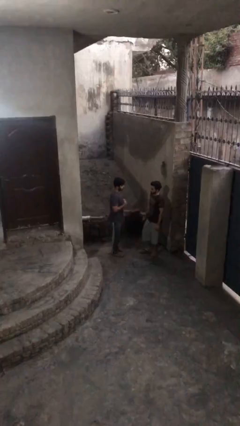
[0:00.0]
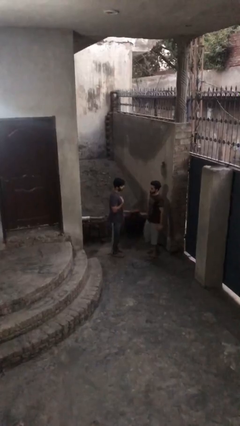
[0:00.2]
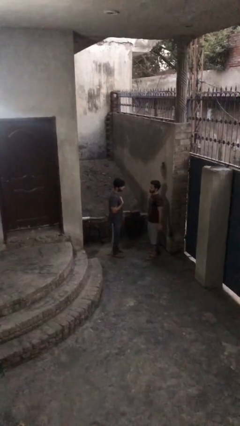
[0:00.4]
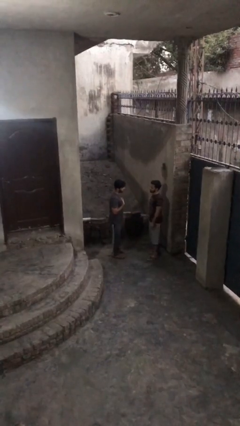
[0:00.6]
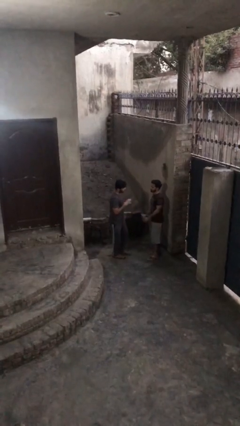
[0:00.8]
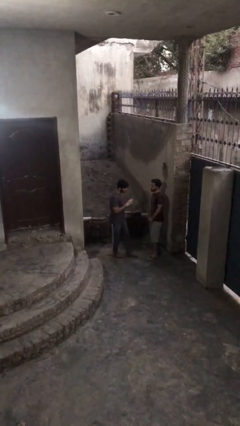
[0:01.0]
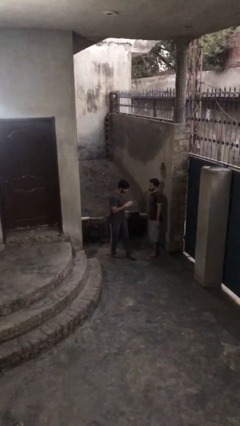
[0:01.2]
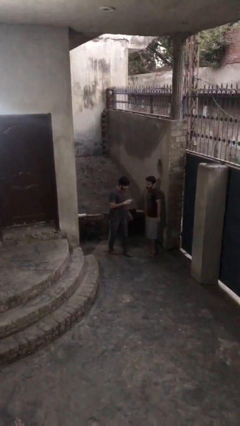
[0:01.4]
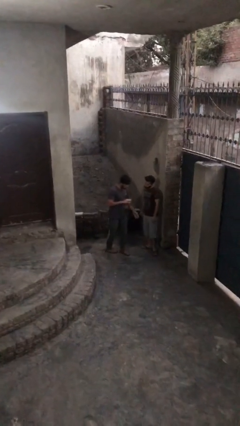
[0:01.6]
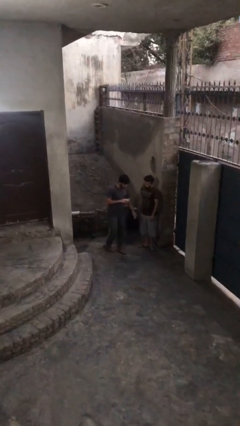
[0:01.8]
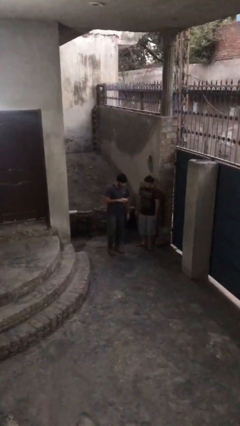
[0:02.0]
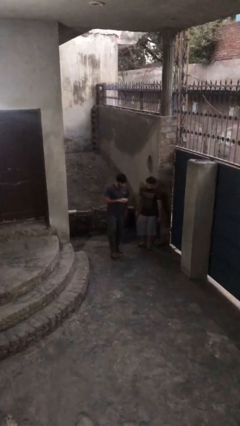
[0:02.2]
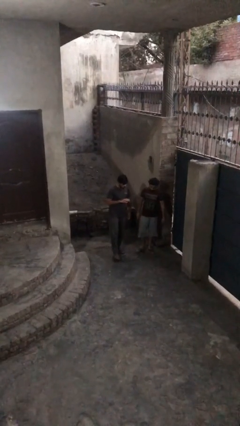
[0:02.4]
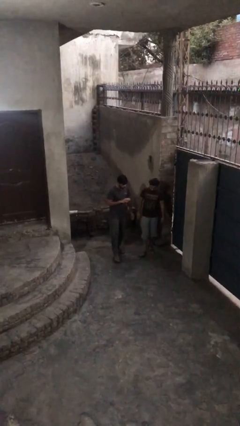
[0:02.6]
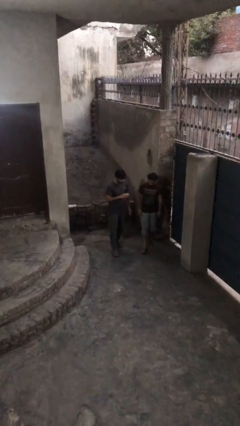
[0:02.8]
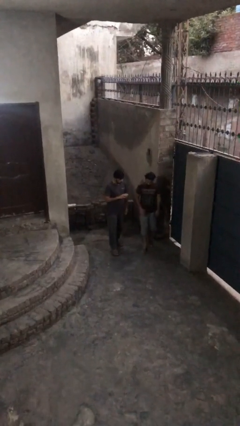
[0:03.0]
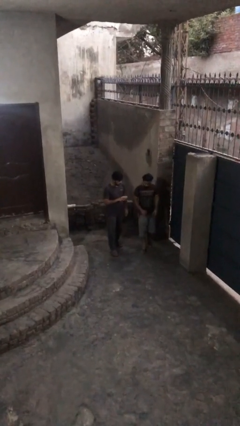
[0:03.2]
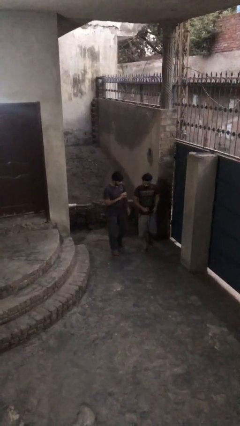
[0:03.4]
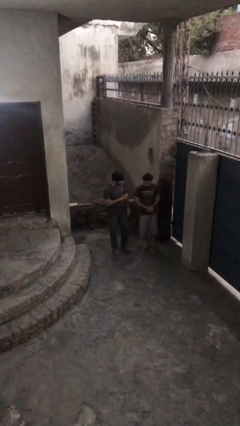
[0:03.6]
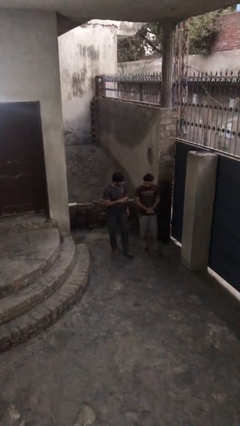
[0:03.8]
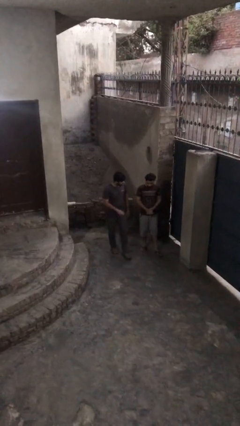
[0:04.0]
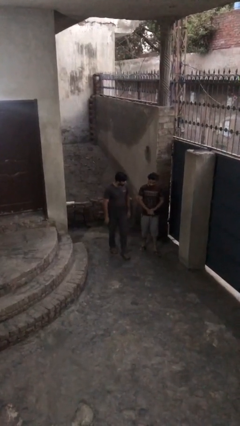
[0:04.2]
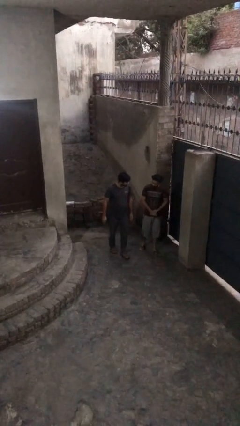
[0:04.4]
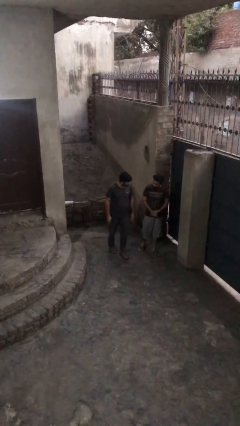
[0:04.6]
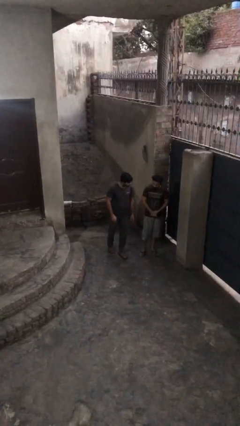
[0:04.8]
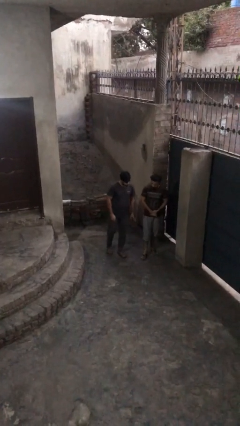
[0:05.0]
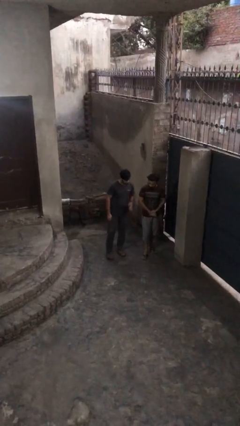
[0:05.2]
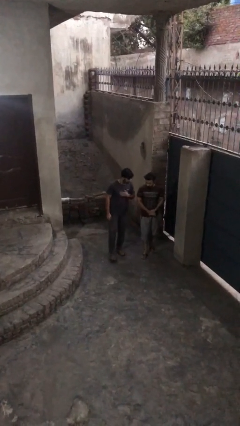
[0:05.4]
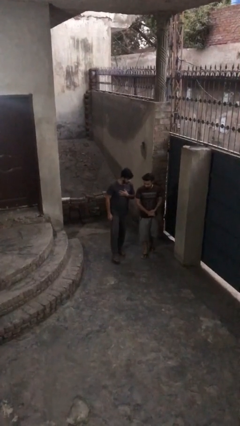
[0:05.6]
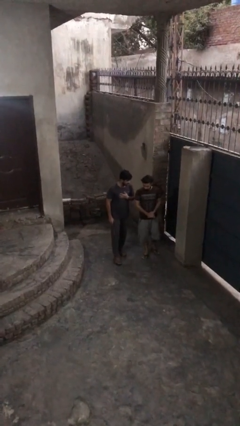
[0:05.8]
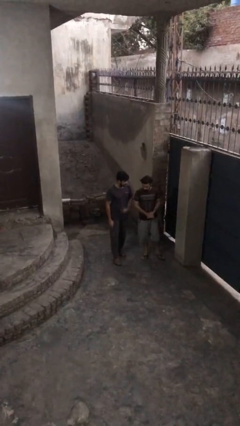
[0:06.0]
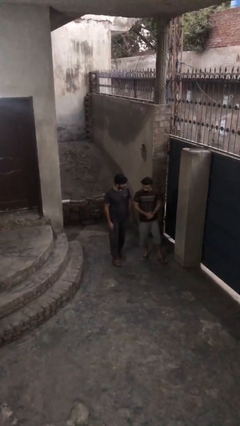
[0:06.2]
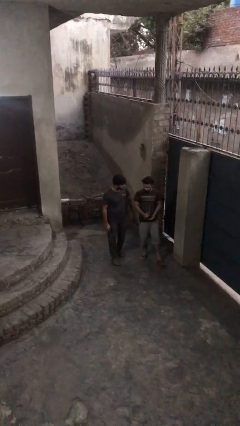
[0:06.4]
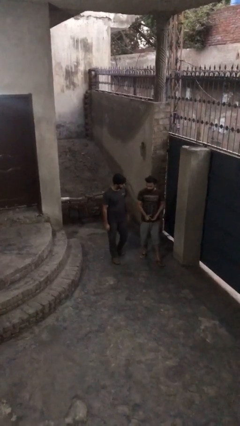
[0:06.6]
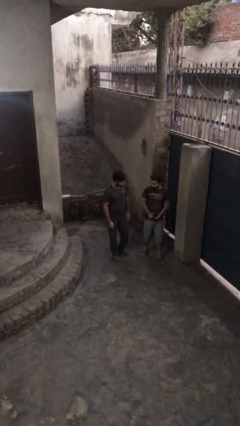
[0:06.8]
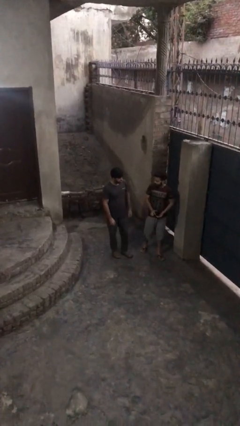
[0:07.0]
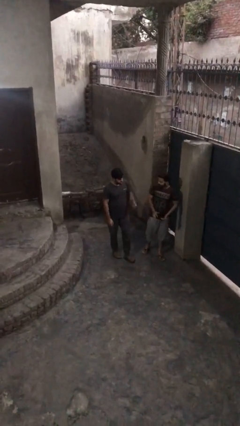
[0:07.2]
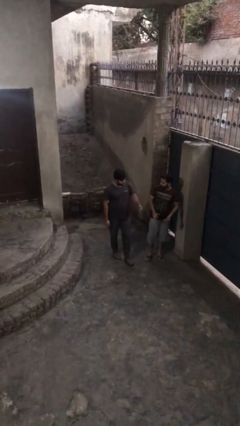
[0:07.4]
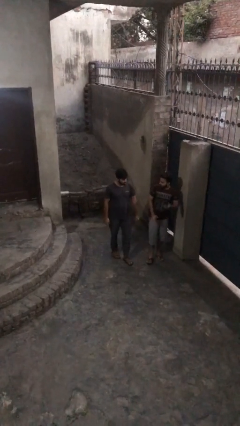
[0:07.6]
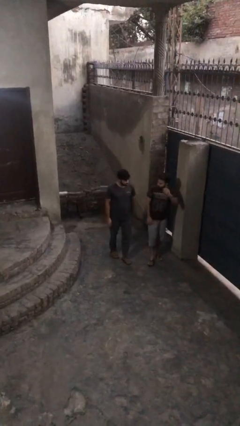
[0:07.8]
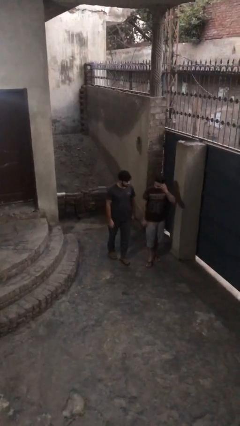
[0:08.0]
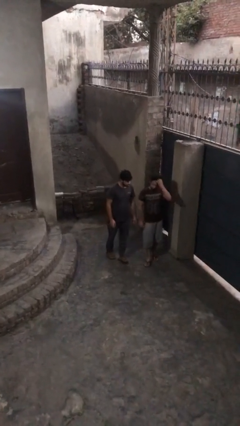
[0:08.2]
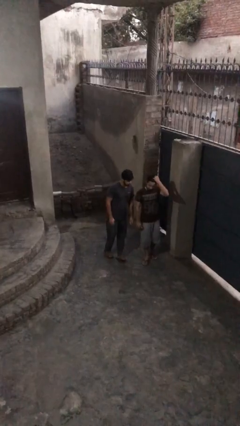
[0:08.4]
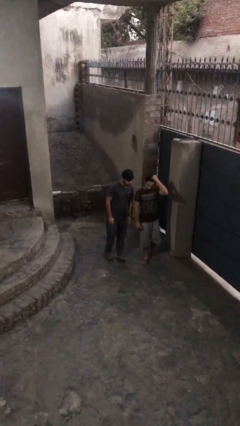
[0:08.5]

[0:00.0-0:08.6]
person talks to person

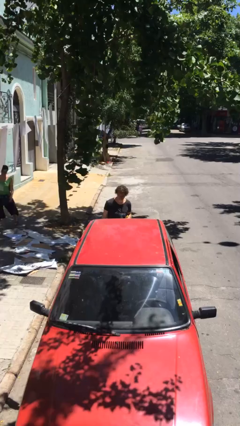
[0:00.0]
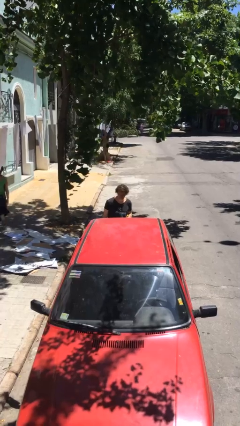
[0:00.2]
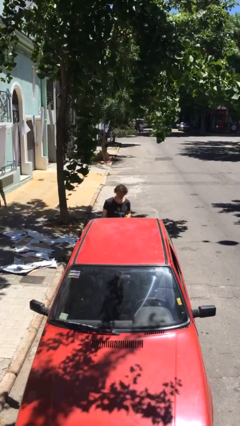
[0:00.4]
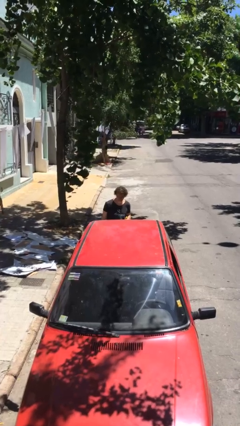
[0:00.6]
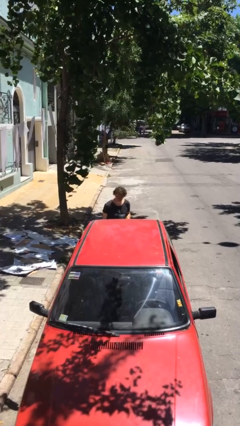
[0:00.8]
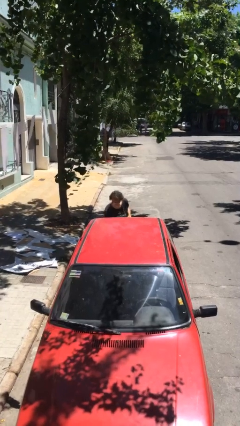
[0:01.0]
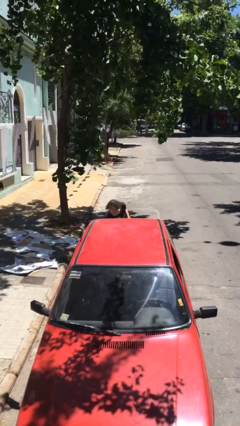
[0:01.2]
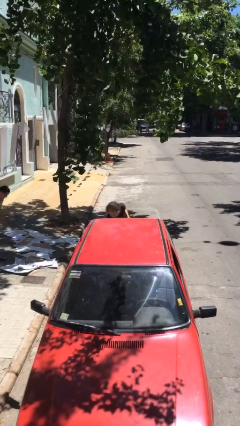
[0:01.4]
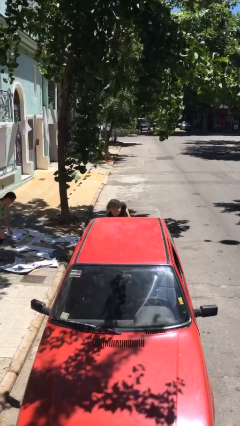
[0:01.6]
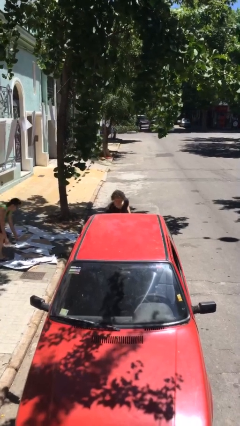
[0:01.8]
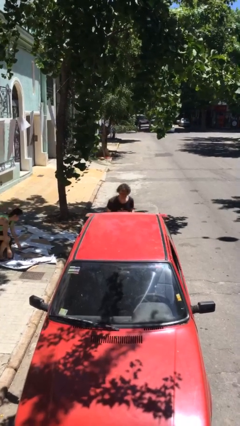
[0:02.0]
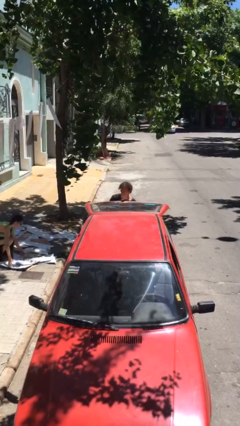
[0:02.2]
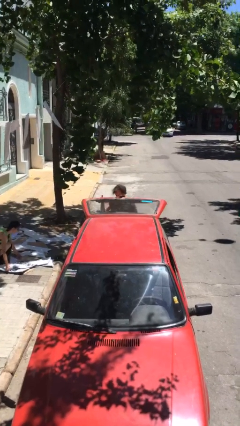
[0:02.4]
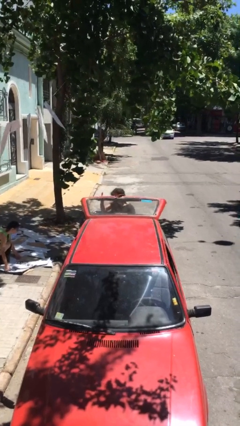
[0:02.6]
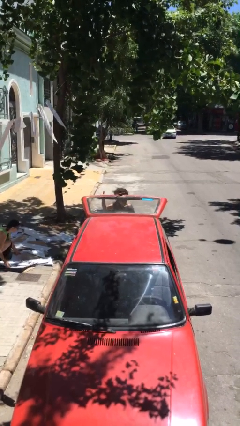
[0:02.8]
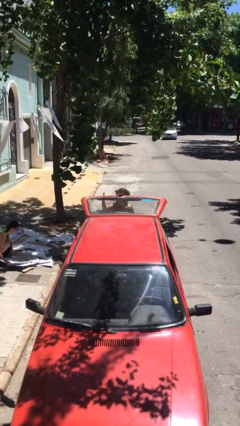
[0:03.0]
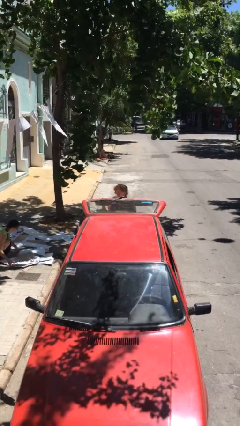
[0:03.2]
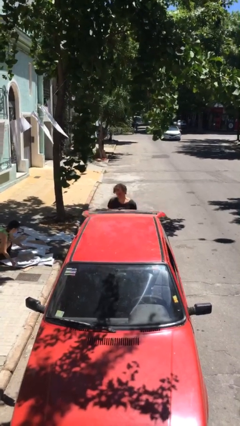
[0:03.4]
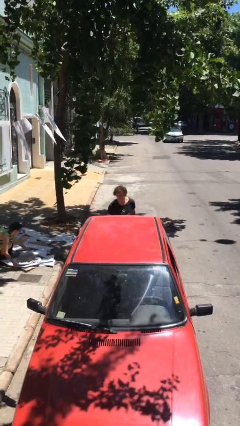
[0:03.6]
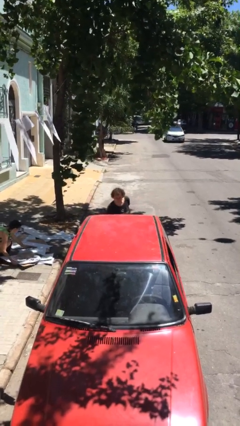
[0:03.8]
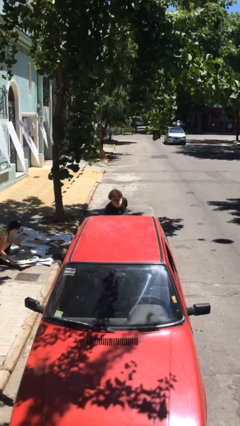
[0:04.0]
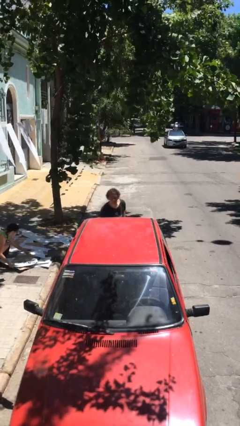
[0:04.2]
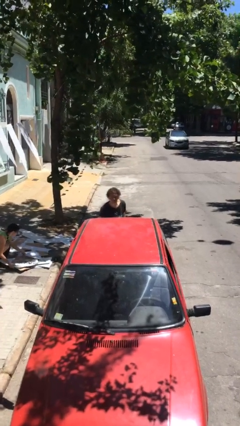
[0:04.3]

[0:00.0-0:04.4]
person loads car

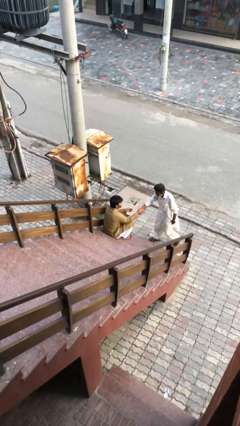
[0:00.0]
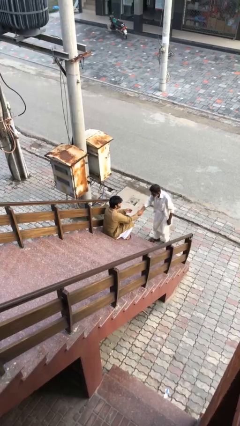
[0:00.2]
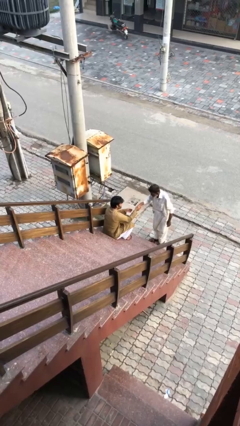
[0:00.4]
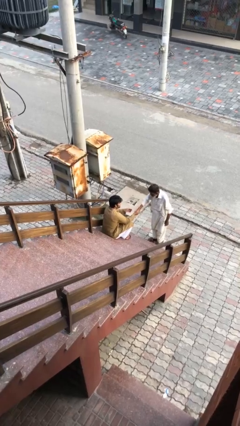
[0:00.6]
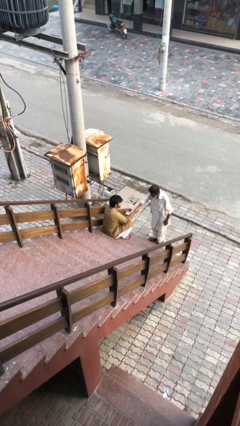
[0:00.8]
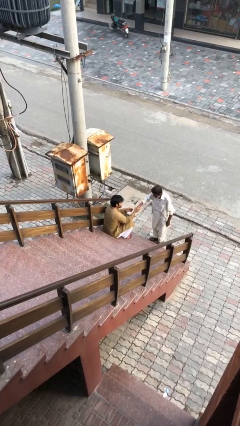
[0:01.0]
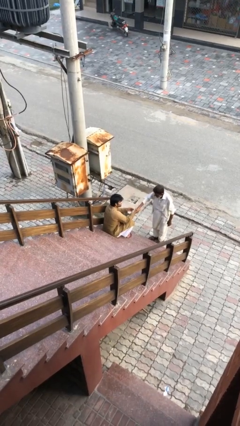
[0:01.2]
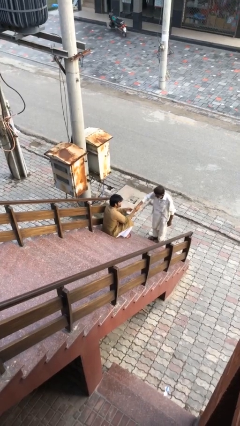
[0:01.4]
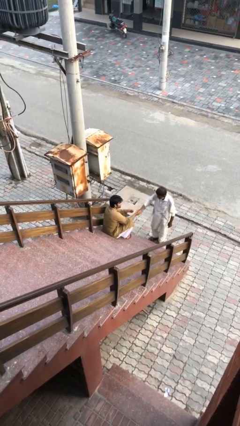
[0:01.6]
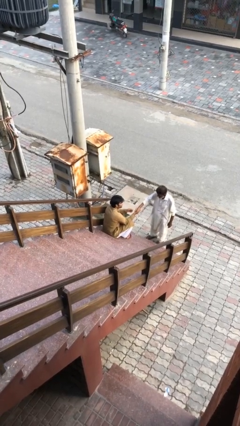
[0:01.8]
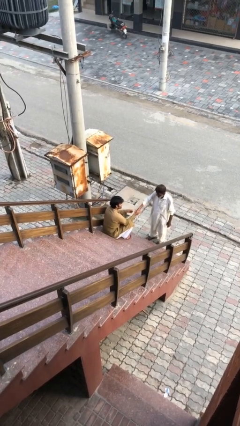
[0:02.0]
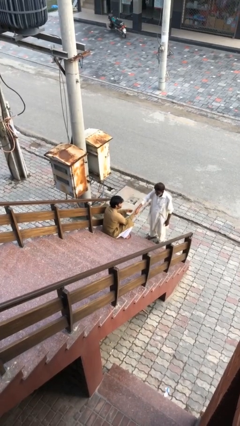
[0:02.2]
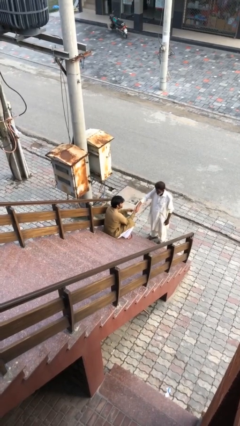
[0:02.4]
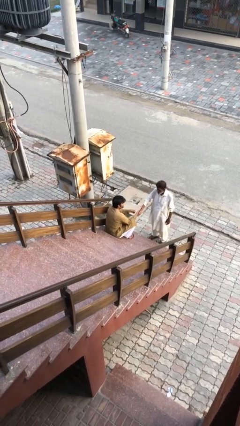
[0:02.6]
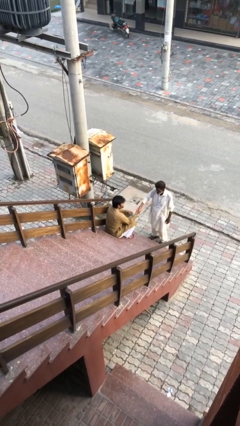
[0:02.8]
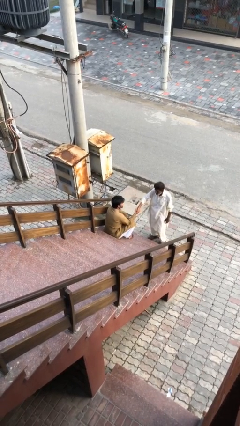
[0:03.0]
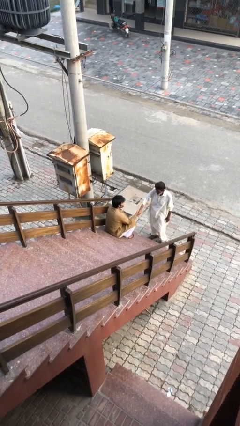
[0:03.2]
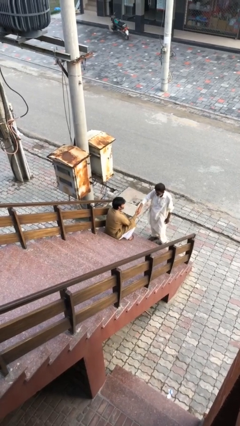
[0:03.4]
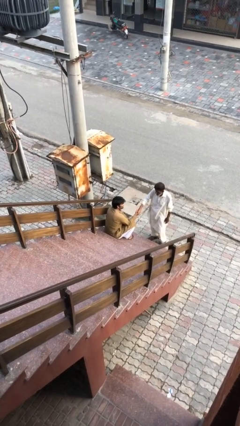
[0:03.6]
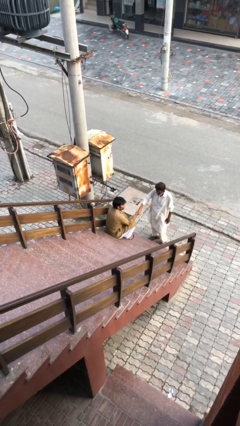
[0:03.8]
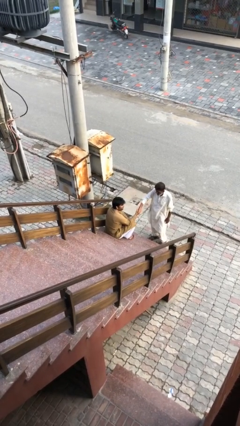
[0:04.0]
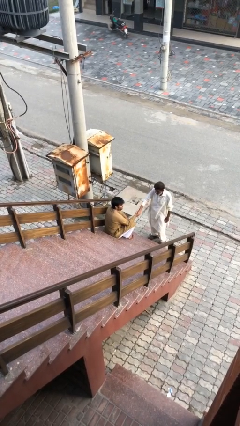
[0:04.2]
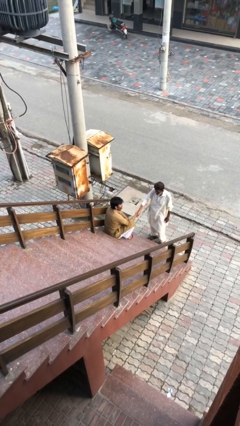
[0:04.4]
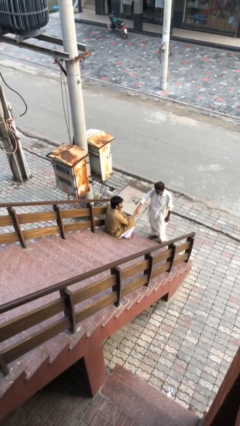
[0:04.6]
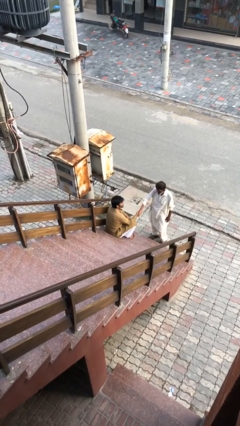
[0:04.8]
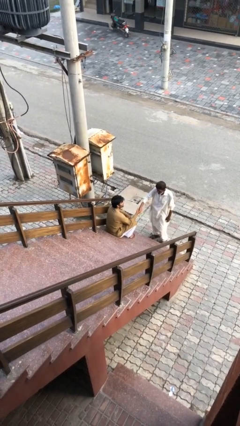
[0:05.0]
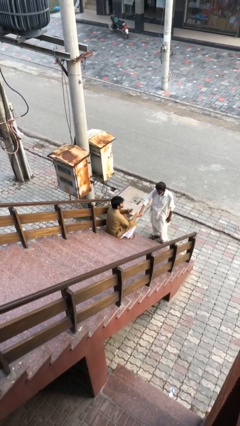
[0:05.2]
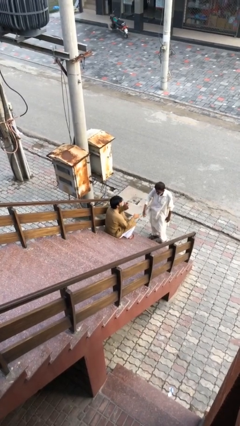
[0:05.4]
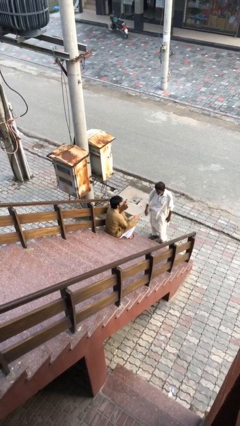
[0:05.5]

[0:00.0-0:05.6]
person shakes hand
